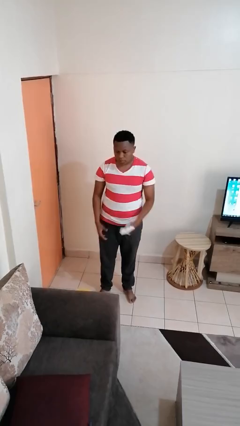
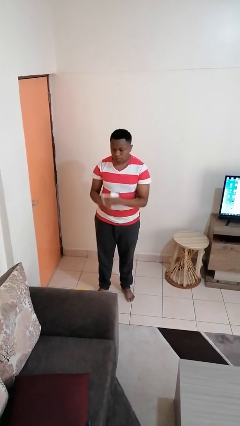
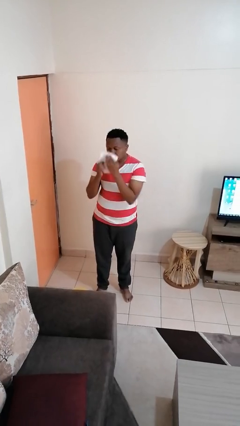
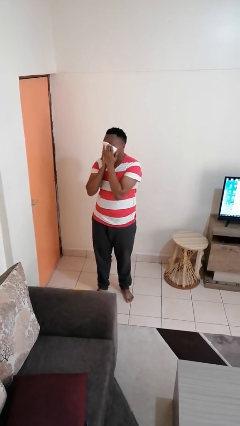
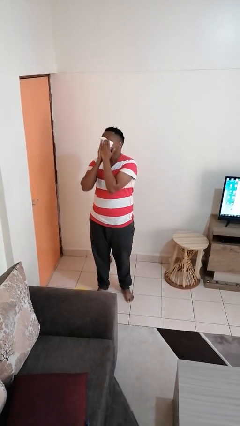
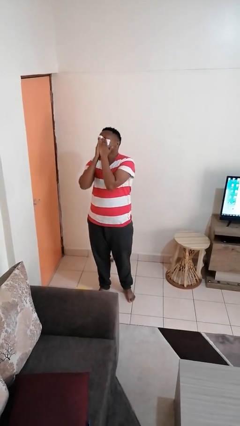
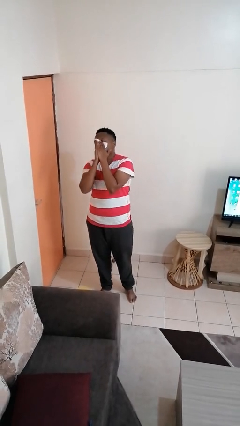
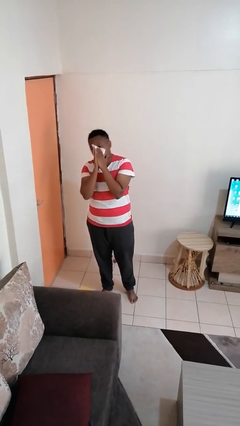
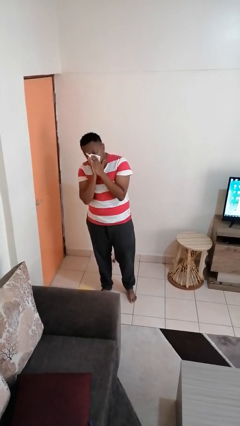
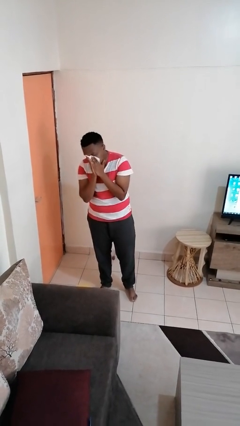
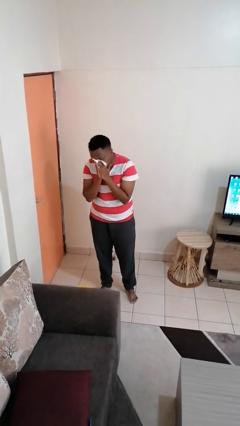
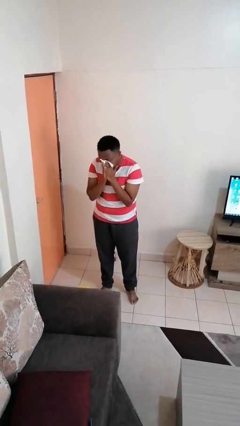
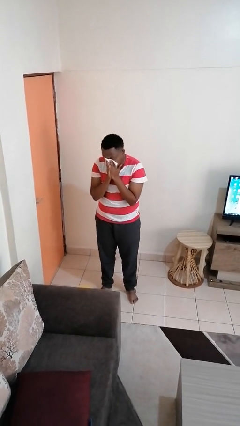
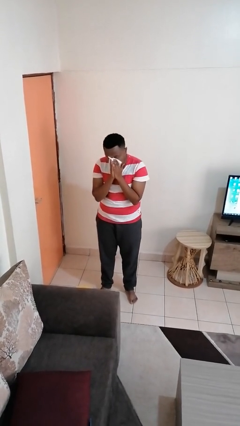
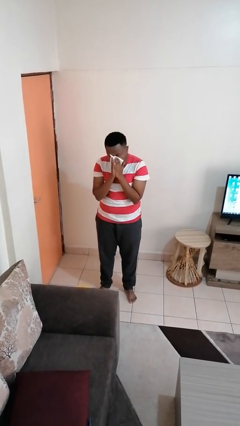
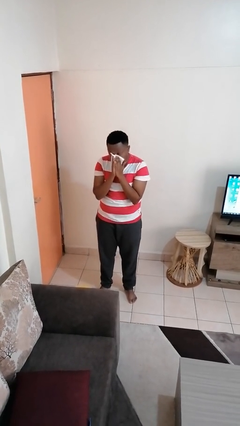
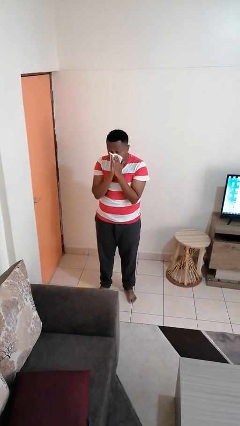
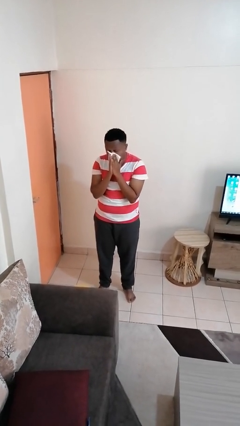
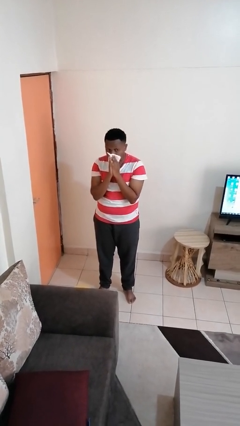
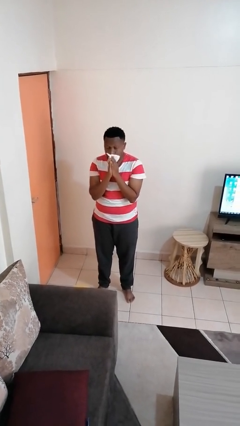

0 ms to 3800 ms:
person blows nose

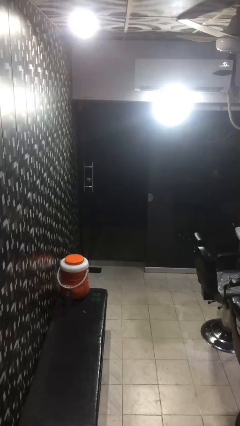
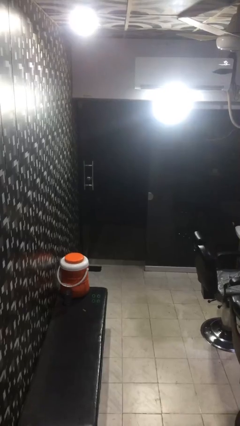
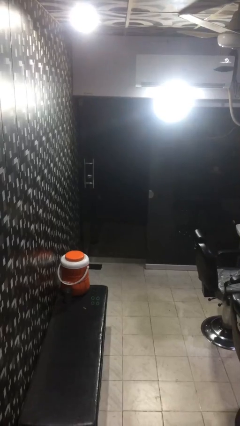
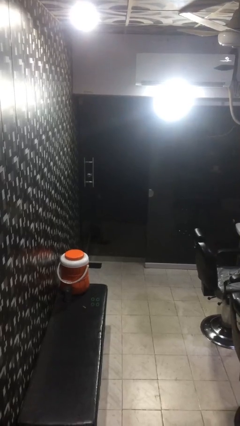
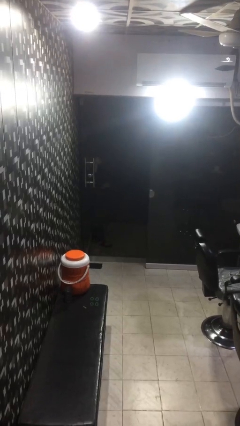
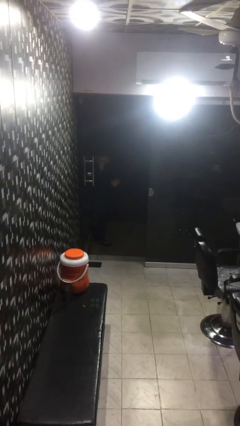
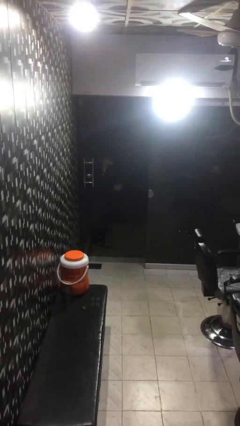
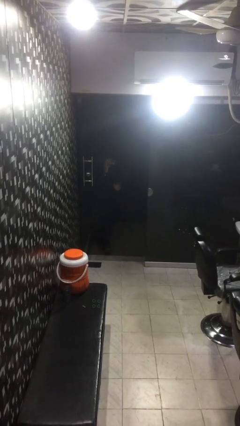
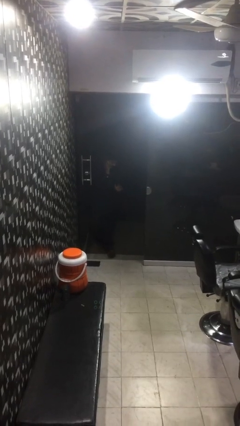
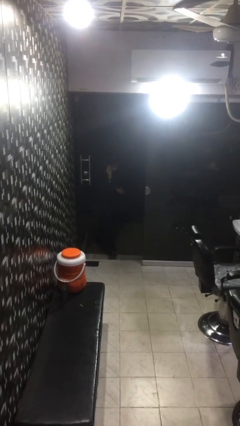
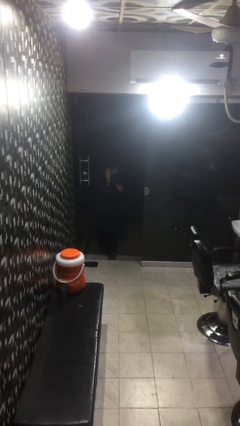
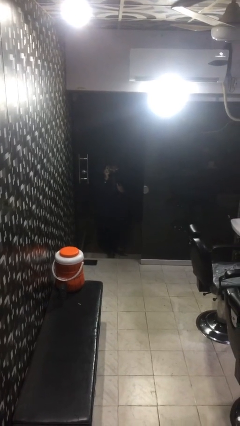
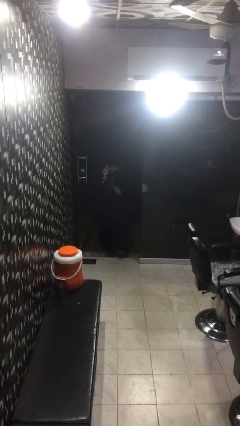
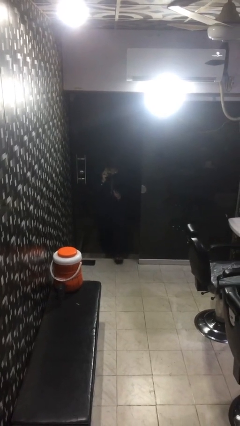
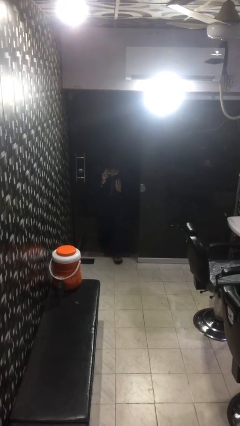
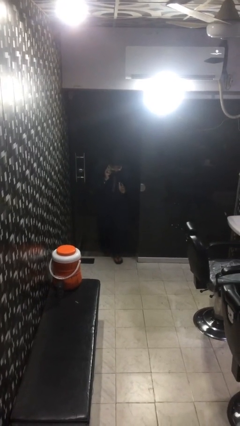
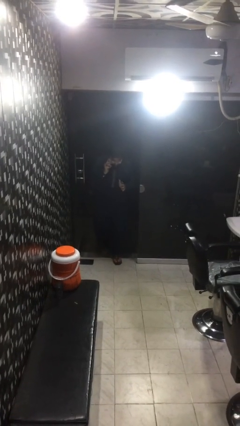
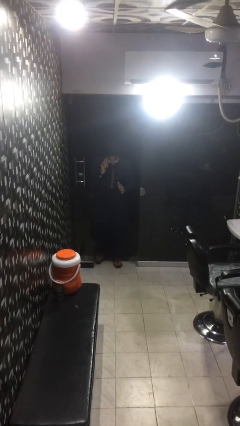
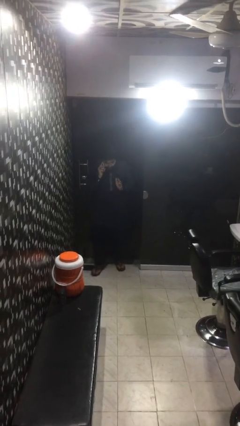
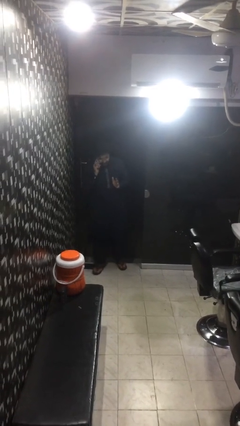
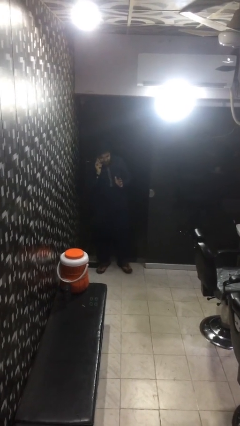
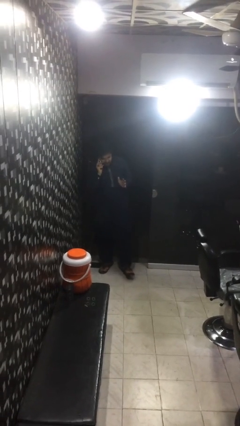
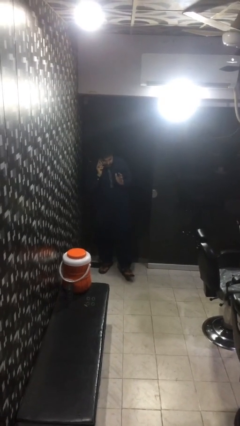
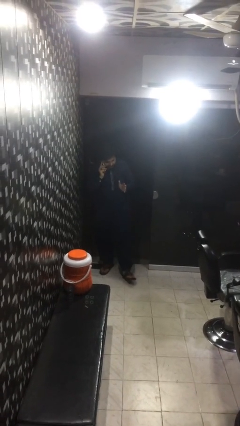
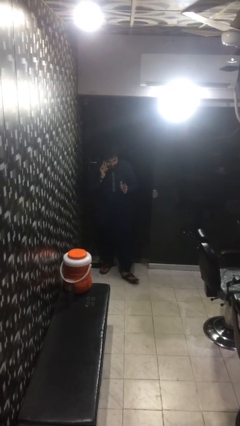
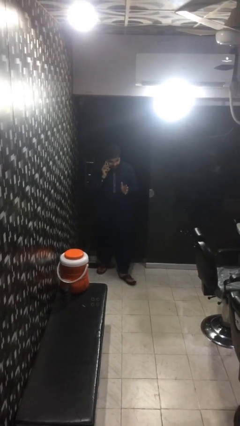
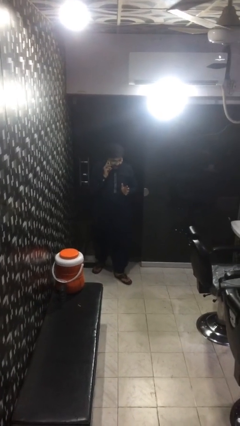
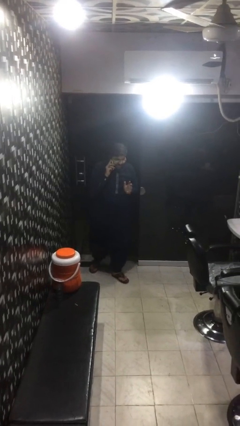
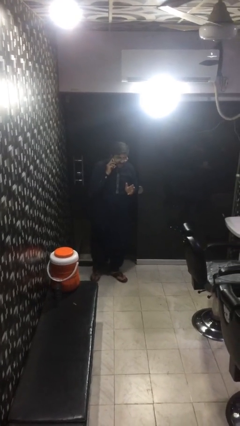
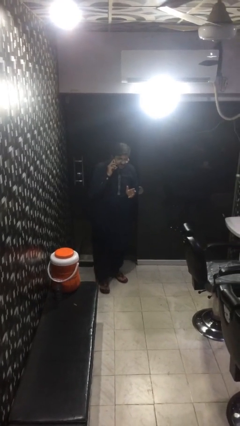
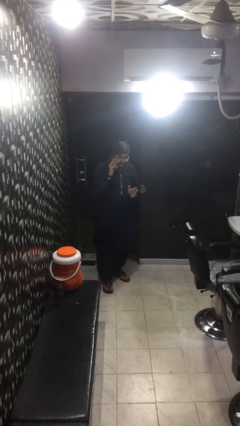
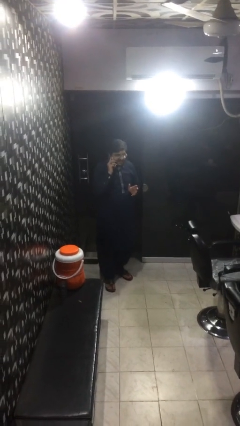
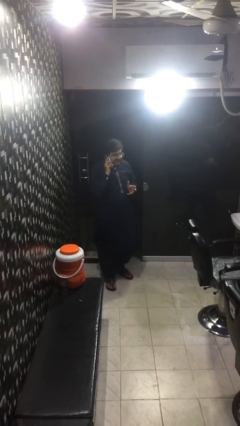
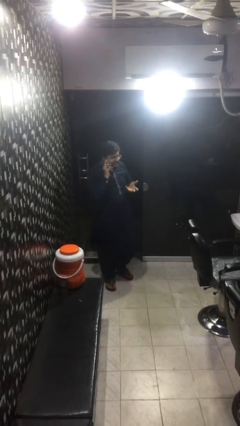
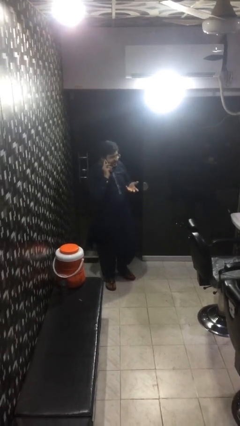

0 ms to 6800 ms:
person enters scene through structure

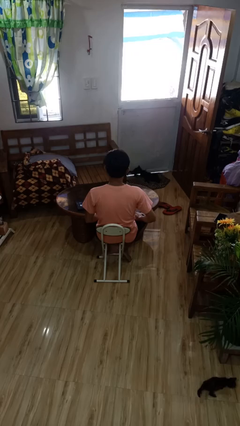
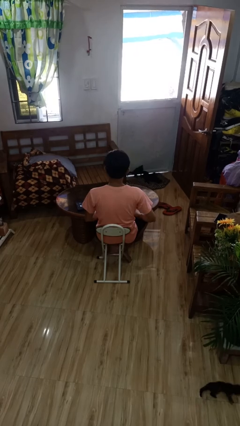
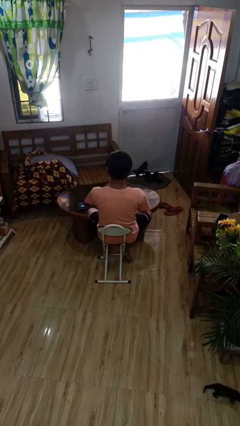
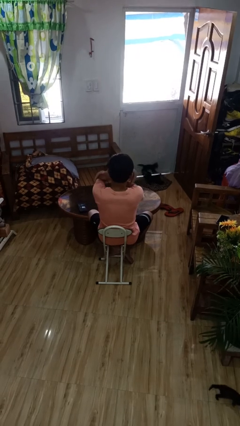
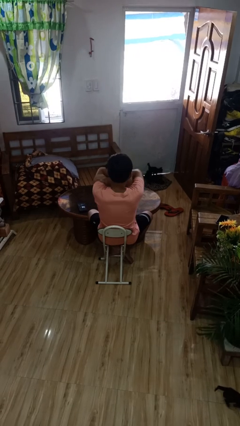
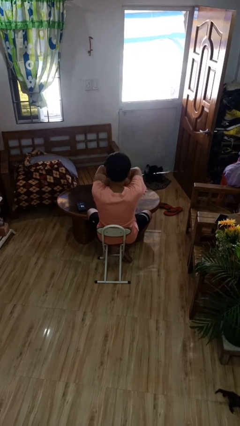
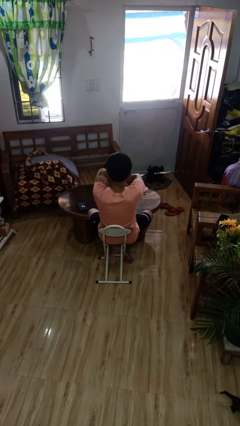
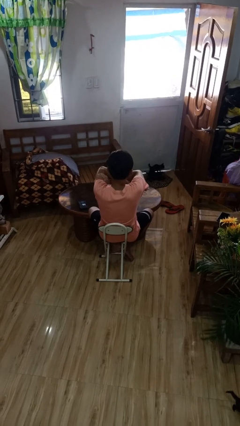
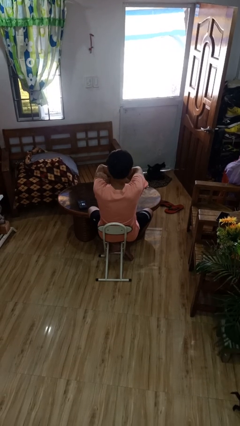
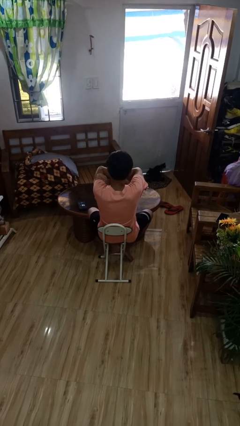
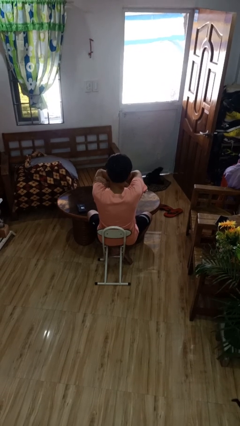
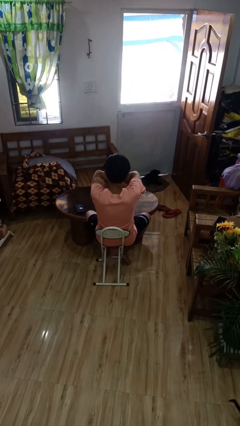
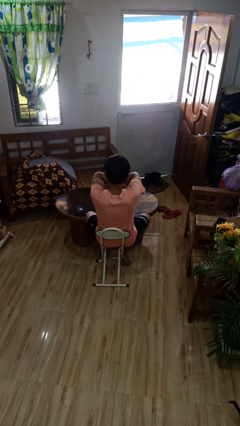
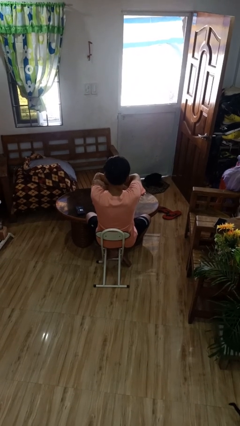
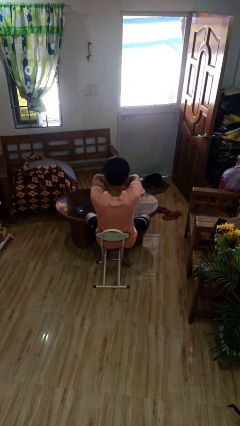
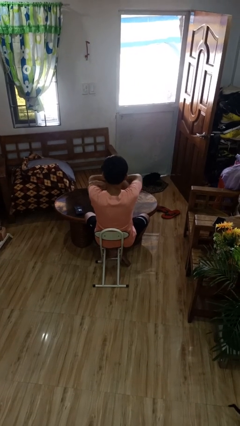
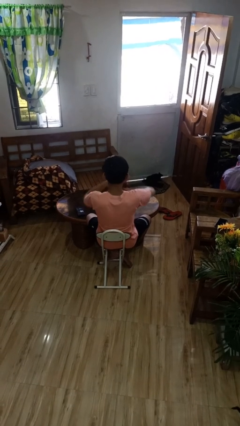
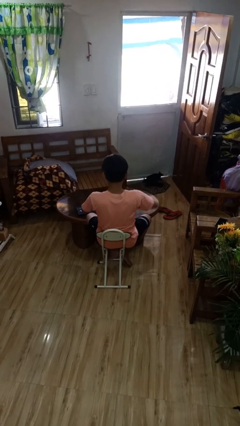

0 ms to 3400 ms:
person crosses arms

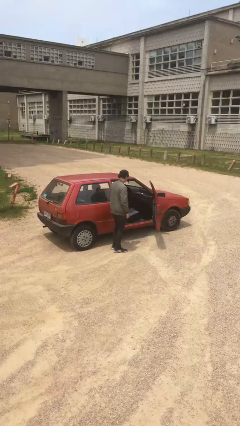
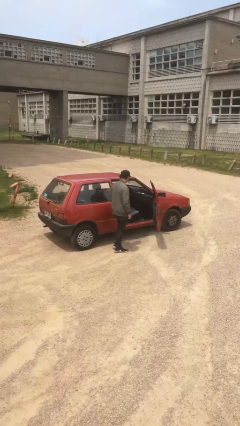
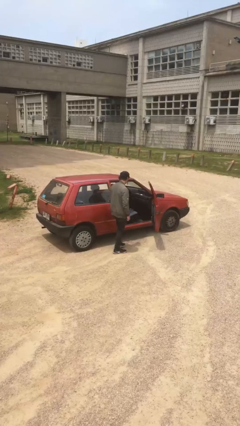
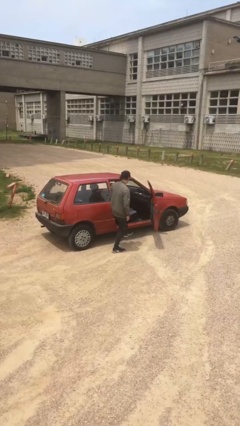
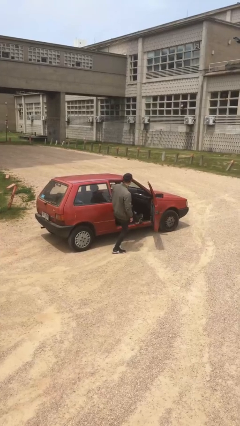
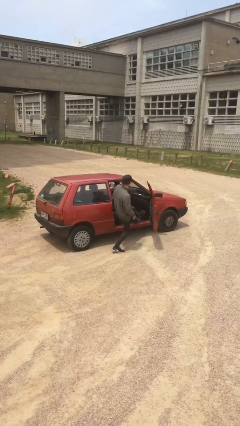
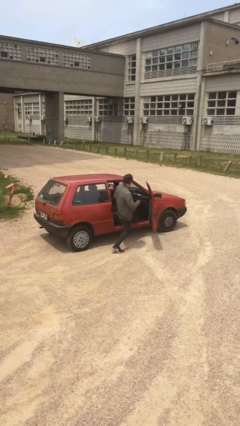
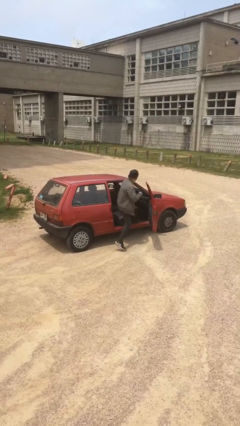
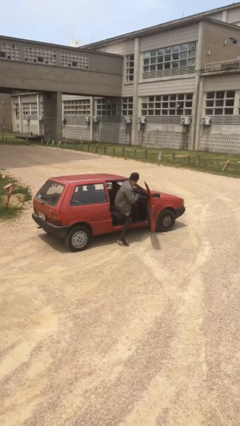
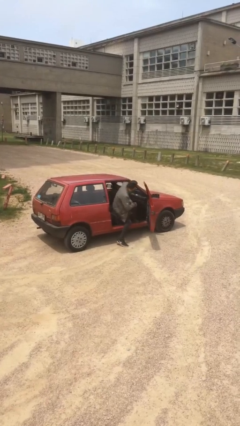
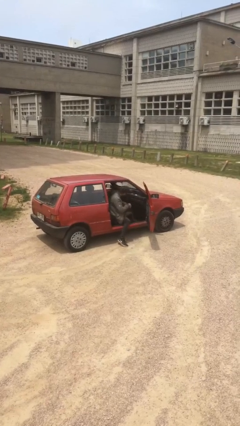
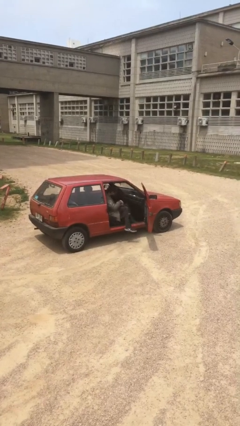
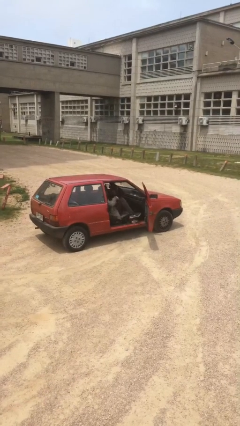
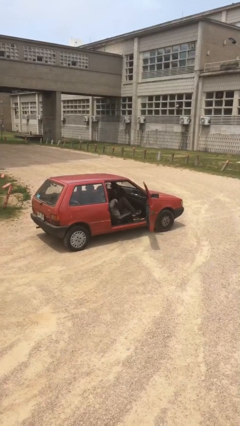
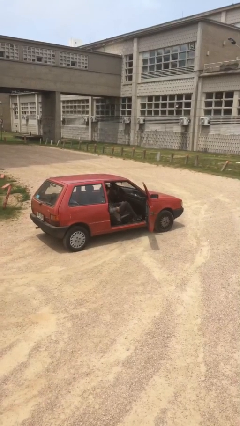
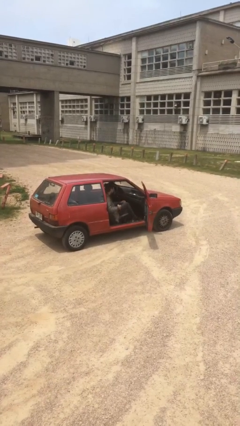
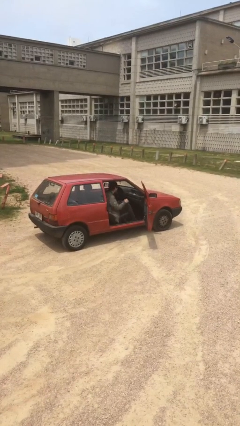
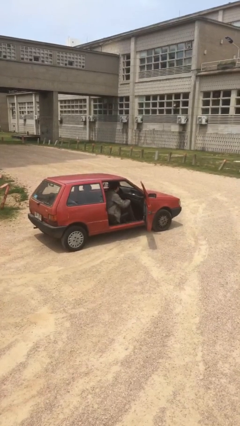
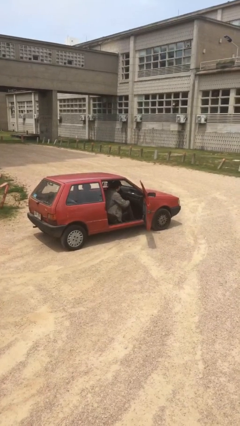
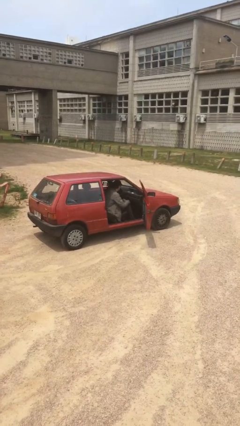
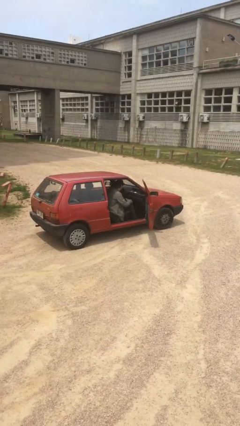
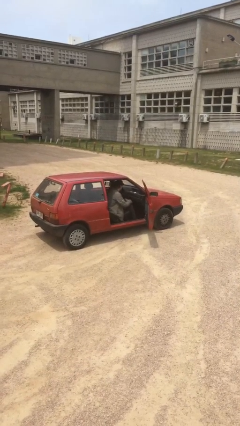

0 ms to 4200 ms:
person enters car
